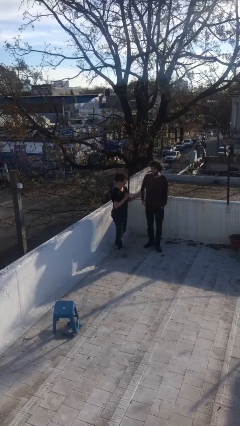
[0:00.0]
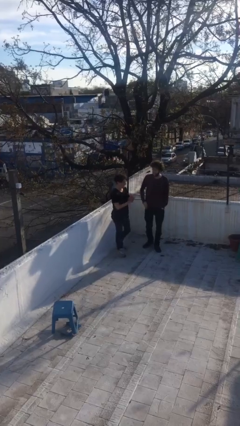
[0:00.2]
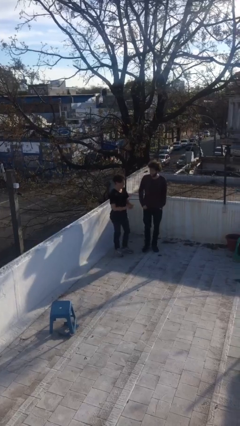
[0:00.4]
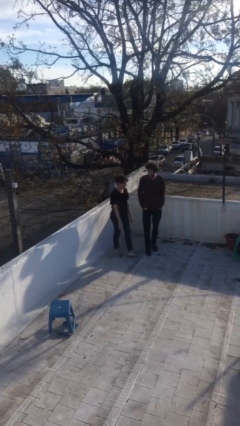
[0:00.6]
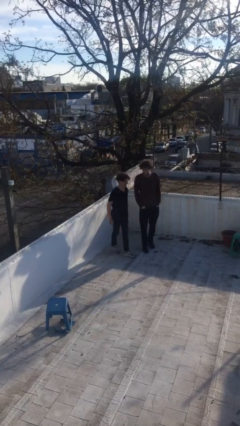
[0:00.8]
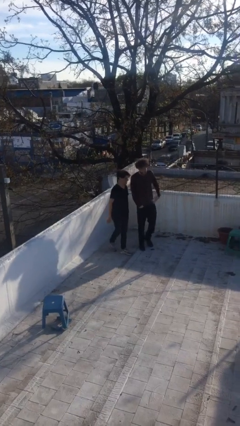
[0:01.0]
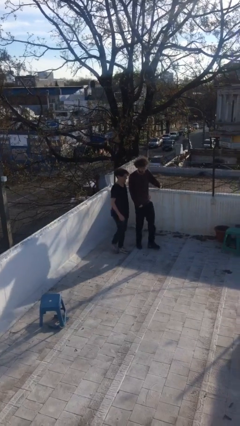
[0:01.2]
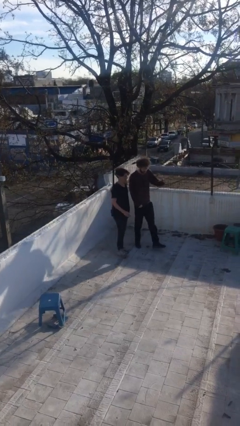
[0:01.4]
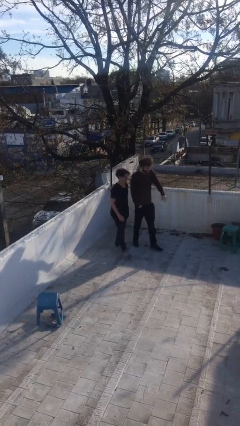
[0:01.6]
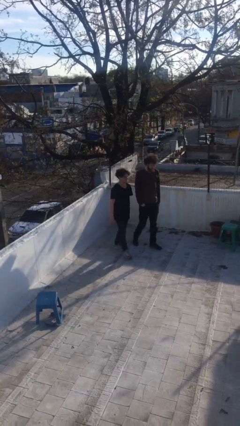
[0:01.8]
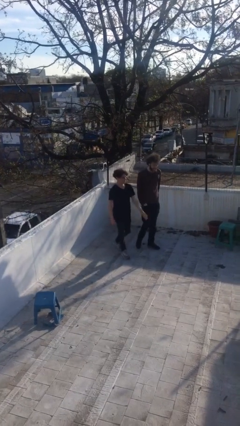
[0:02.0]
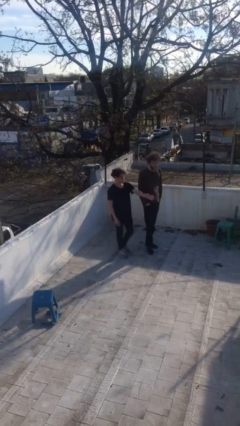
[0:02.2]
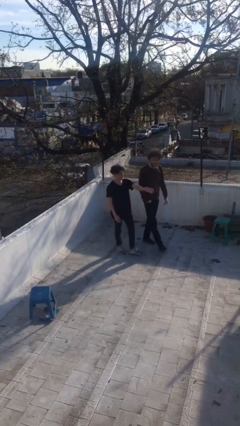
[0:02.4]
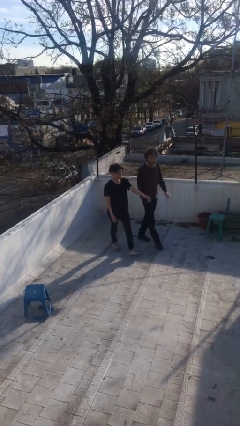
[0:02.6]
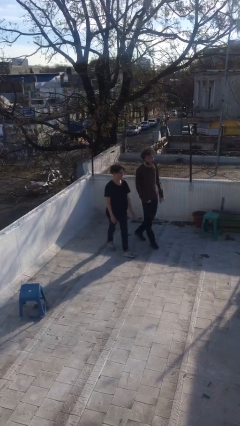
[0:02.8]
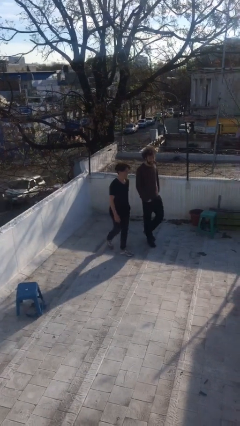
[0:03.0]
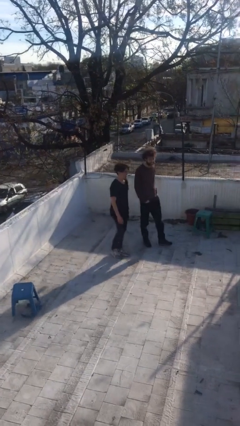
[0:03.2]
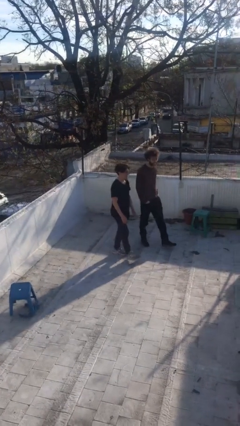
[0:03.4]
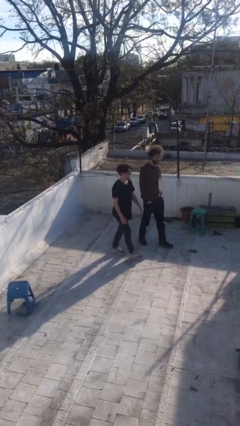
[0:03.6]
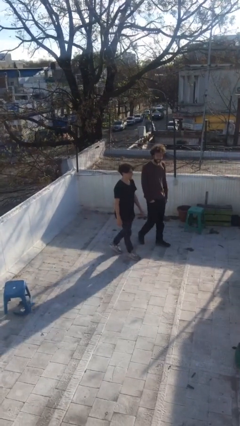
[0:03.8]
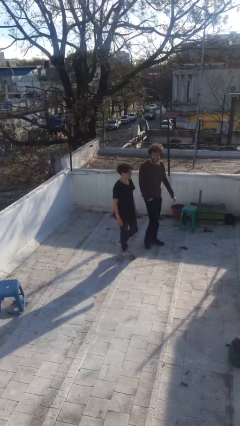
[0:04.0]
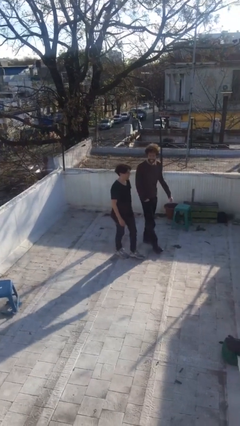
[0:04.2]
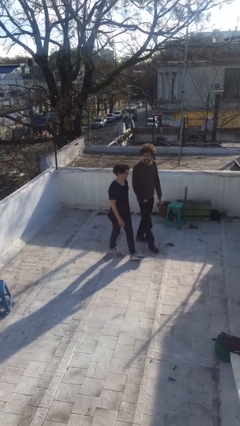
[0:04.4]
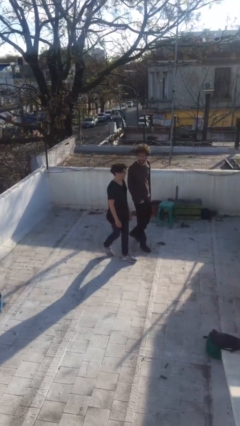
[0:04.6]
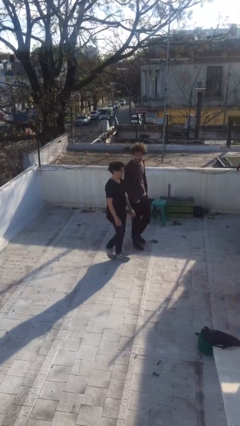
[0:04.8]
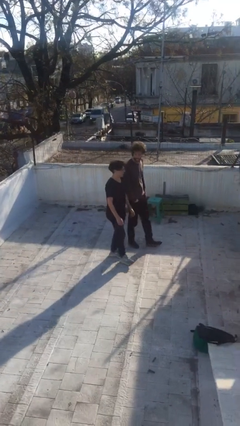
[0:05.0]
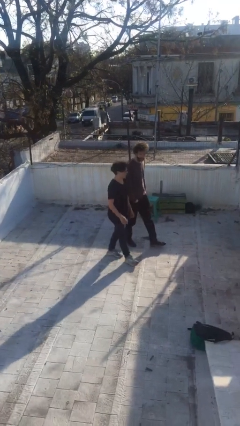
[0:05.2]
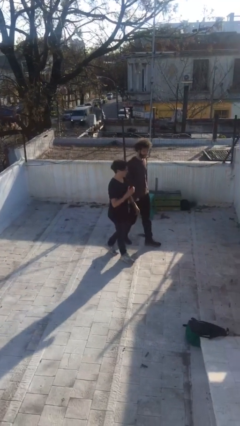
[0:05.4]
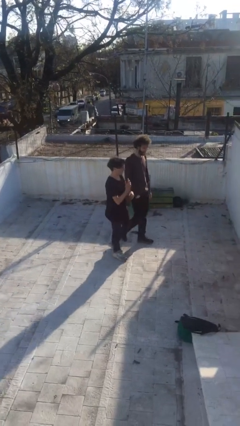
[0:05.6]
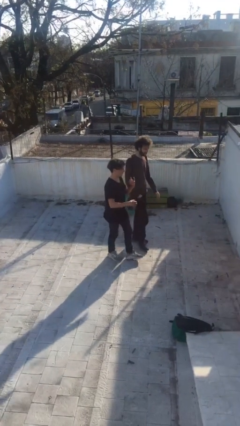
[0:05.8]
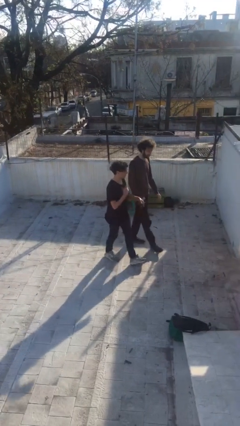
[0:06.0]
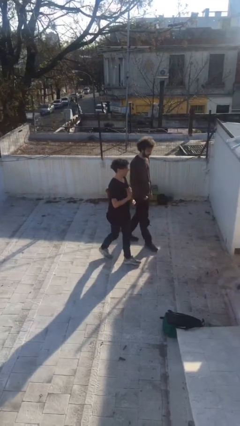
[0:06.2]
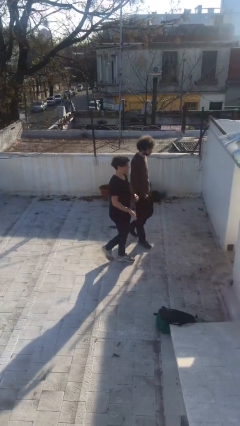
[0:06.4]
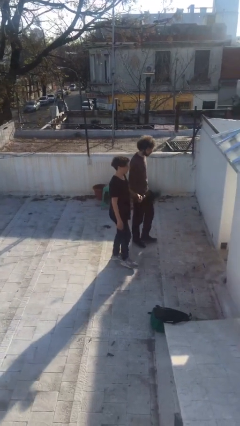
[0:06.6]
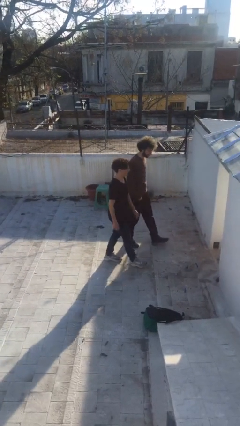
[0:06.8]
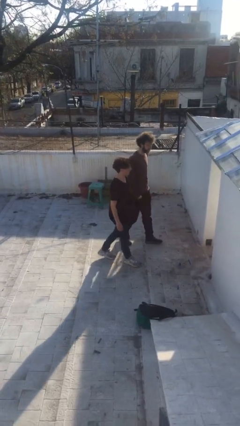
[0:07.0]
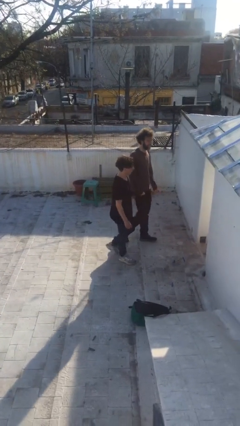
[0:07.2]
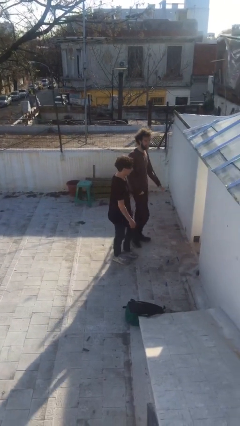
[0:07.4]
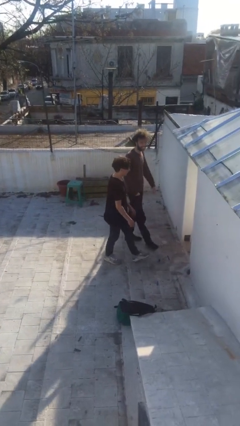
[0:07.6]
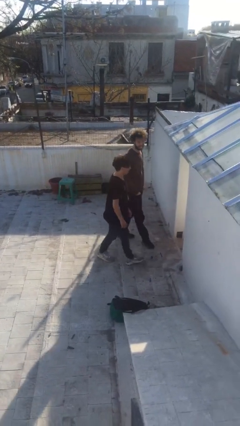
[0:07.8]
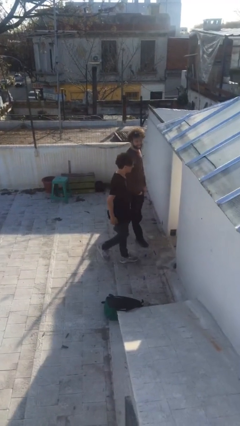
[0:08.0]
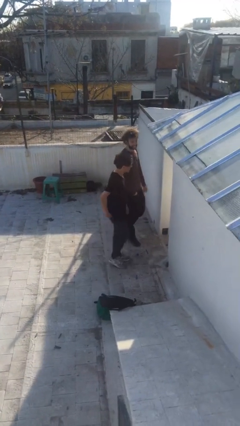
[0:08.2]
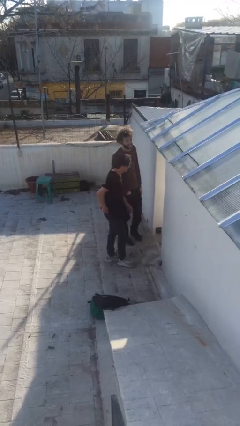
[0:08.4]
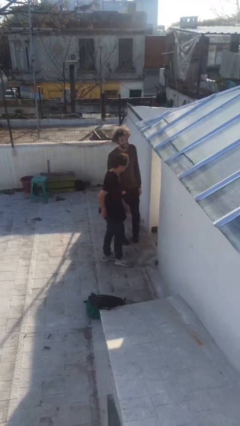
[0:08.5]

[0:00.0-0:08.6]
person talks to person

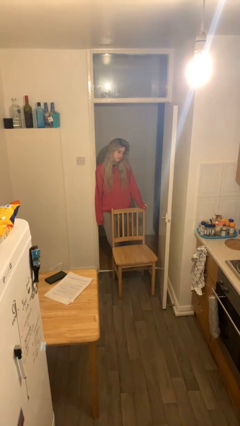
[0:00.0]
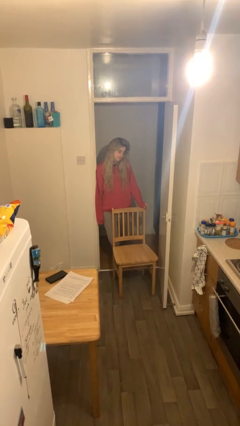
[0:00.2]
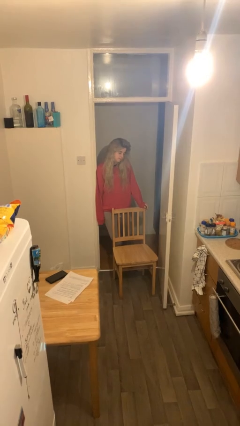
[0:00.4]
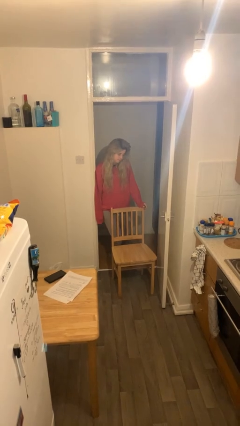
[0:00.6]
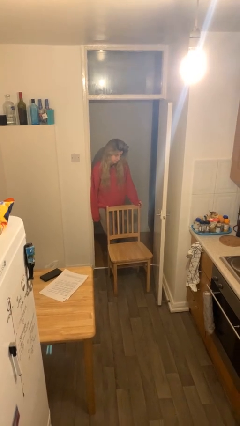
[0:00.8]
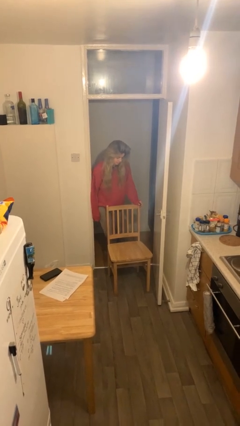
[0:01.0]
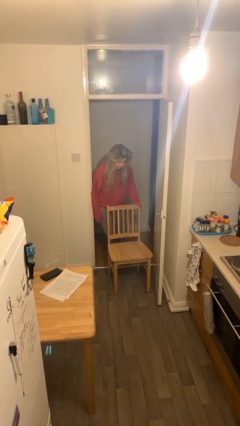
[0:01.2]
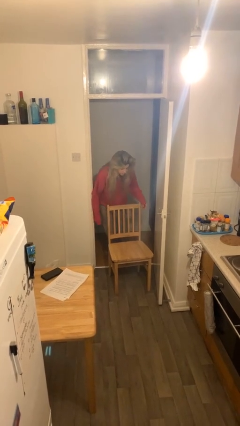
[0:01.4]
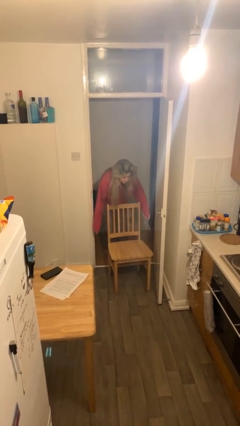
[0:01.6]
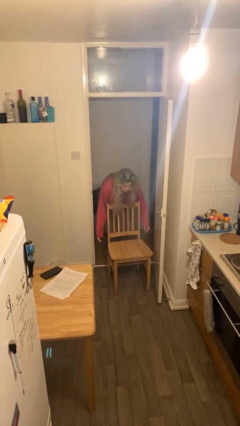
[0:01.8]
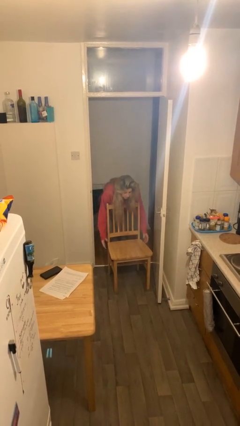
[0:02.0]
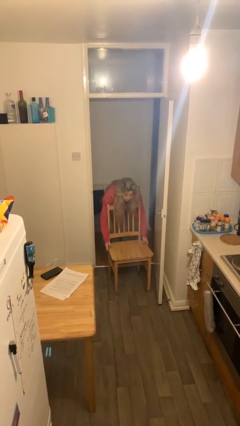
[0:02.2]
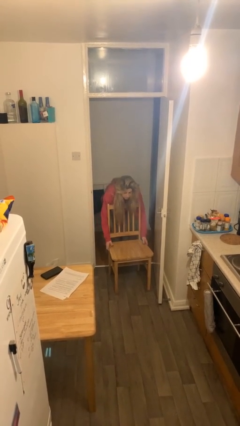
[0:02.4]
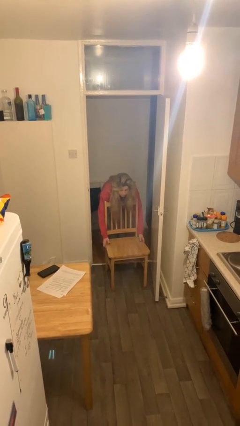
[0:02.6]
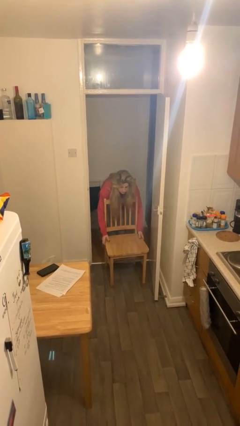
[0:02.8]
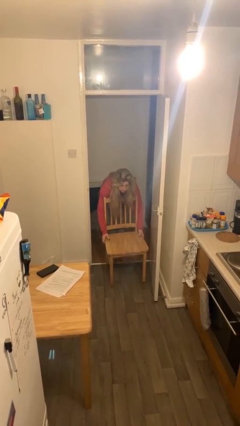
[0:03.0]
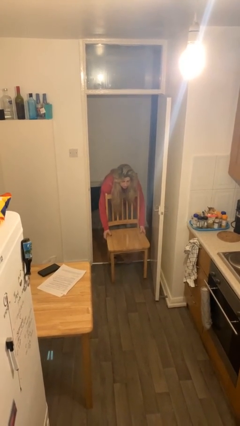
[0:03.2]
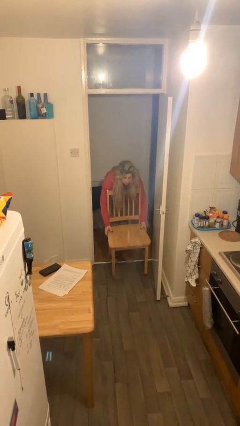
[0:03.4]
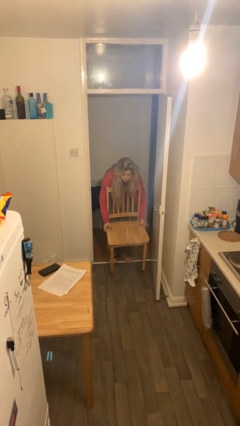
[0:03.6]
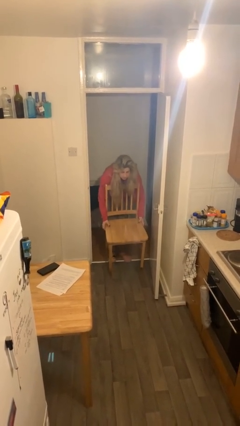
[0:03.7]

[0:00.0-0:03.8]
person picks up object from floor

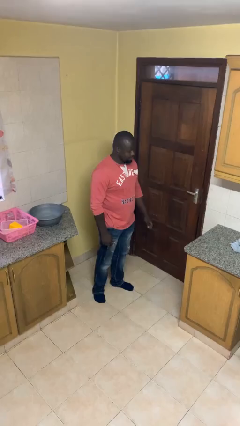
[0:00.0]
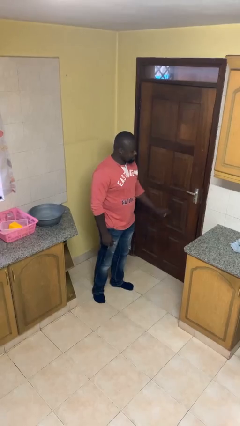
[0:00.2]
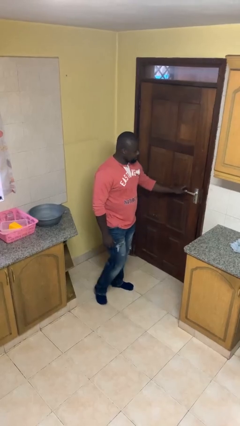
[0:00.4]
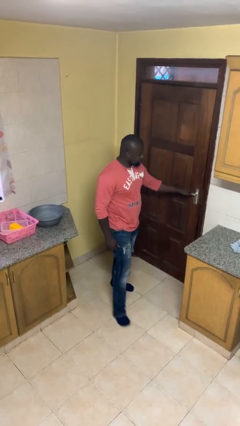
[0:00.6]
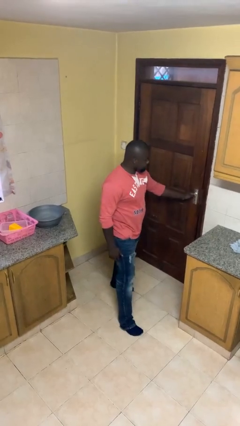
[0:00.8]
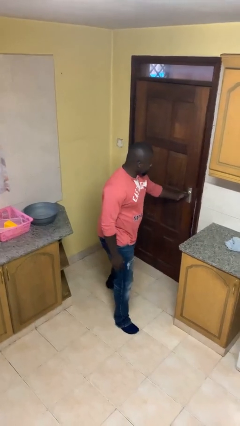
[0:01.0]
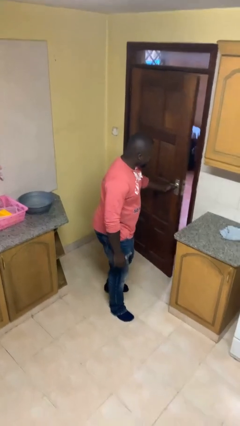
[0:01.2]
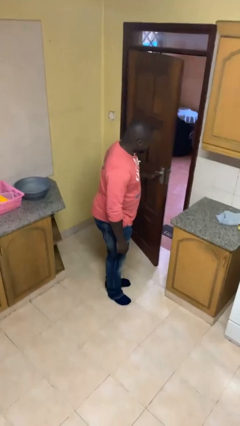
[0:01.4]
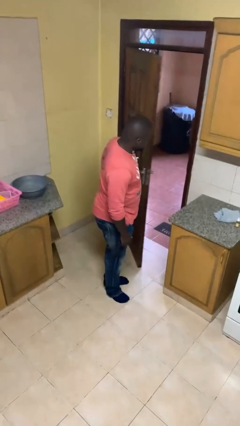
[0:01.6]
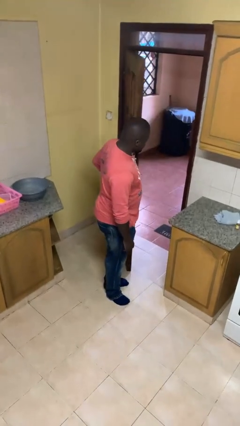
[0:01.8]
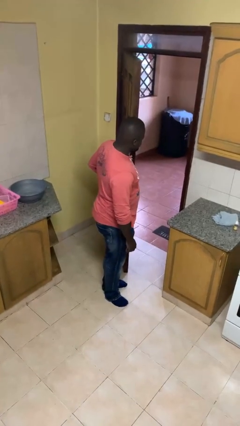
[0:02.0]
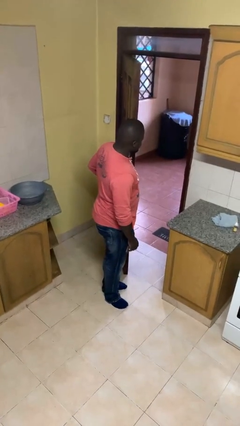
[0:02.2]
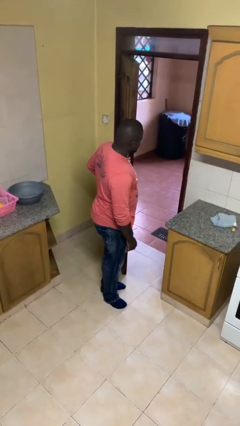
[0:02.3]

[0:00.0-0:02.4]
person opens facility door

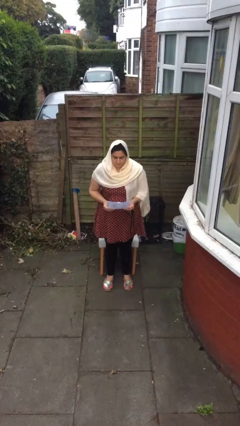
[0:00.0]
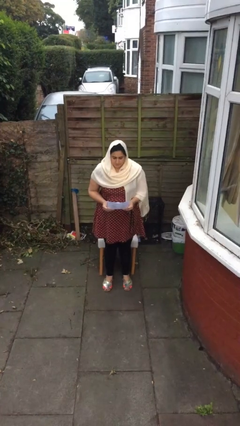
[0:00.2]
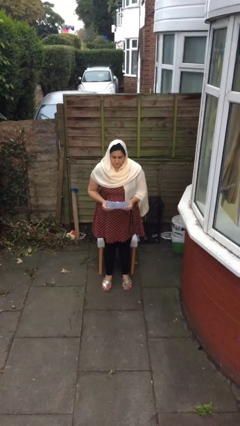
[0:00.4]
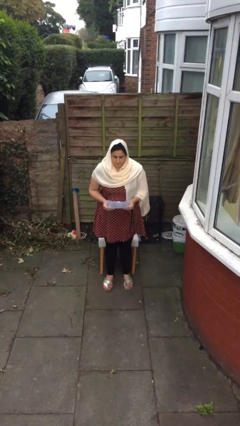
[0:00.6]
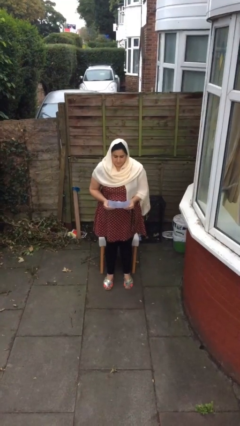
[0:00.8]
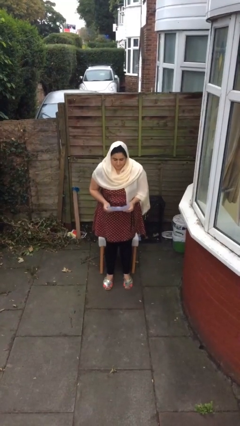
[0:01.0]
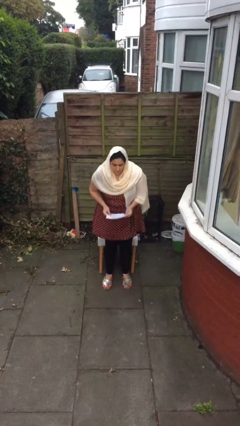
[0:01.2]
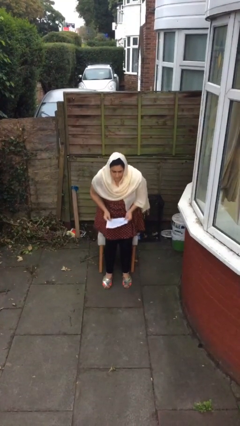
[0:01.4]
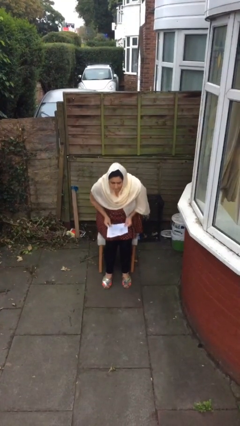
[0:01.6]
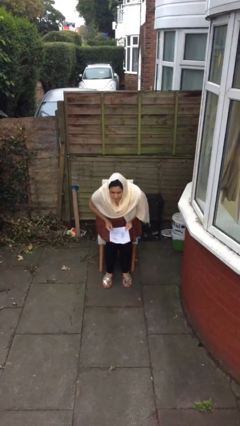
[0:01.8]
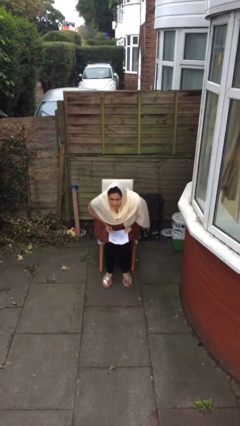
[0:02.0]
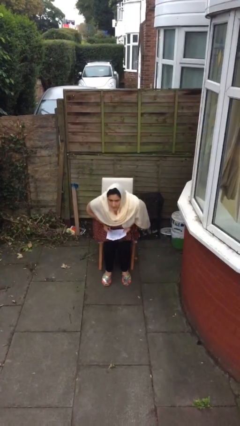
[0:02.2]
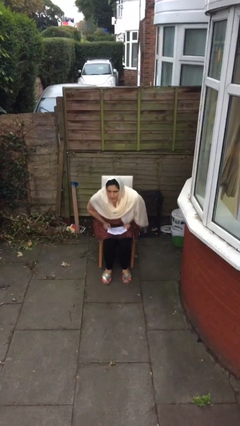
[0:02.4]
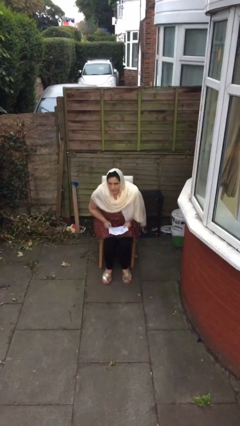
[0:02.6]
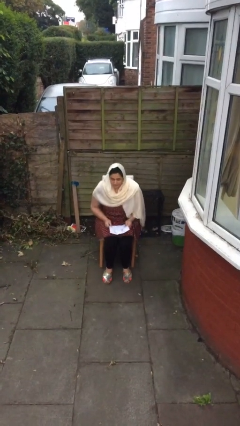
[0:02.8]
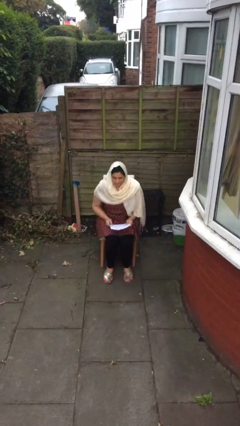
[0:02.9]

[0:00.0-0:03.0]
person sits down
